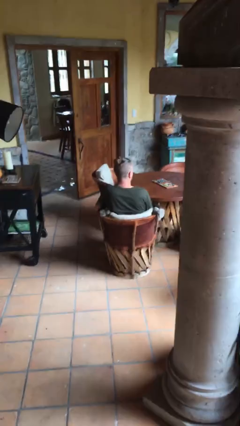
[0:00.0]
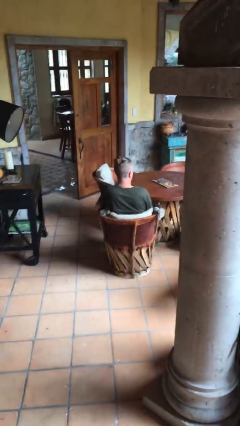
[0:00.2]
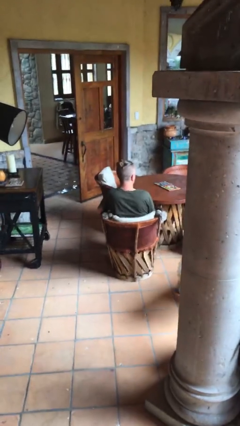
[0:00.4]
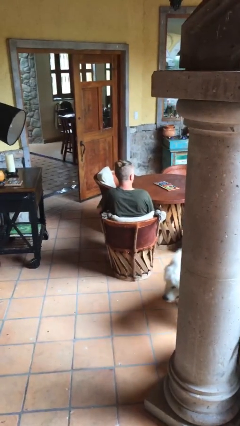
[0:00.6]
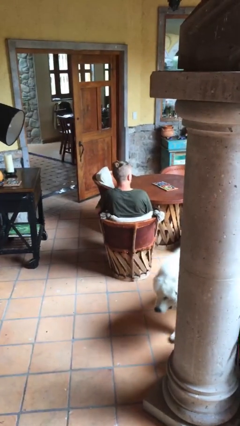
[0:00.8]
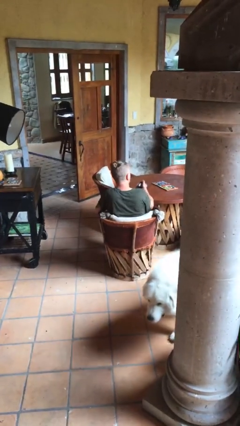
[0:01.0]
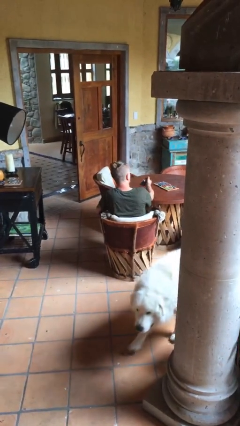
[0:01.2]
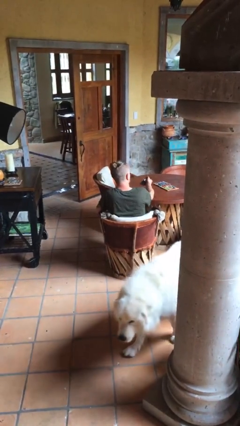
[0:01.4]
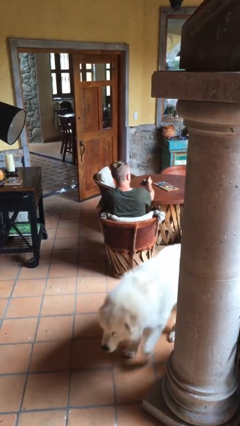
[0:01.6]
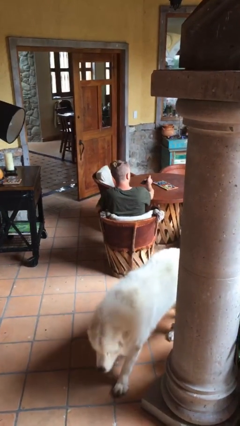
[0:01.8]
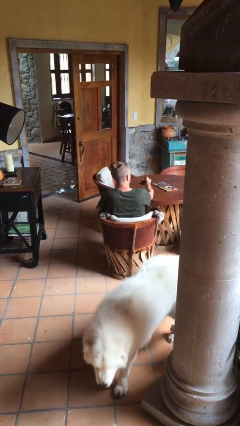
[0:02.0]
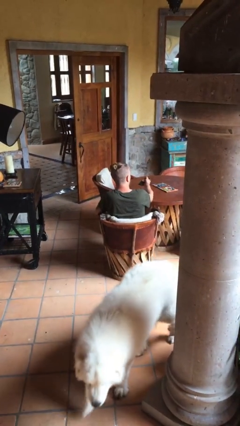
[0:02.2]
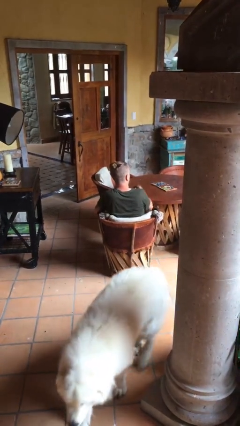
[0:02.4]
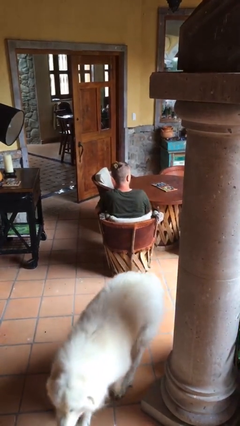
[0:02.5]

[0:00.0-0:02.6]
person uses television remote

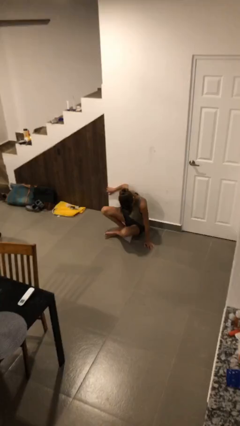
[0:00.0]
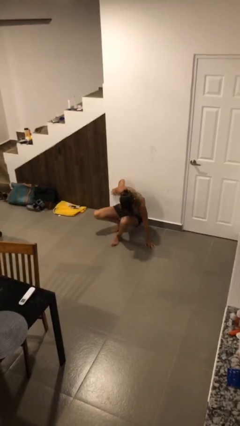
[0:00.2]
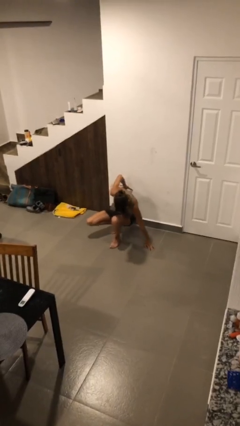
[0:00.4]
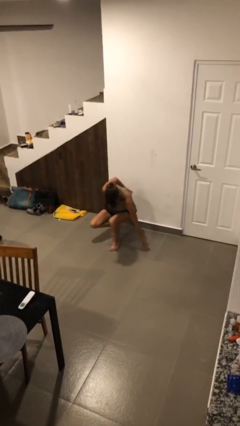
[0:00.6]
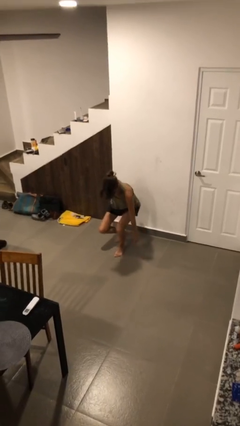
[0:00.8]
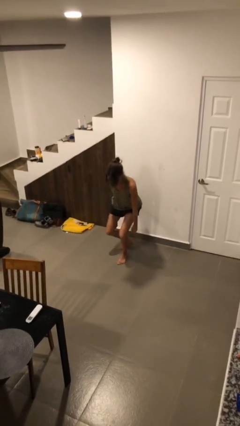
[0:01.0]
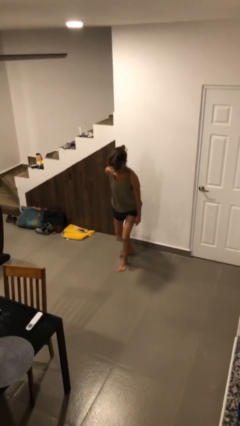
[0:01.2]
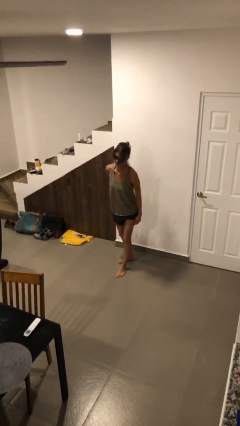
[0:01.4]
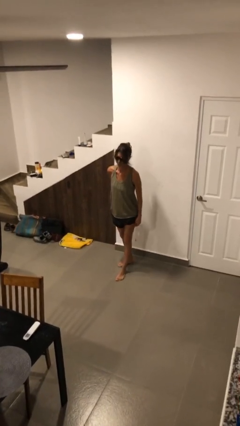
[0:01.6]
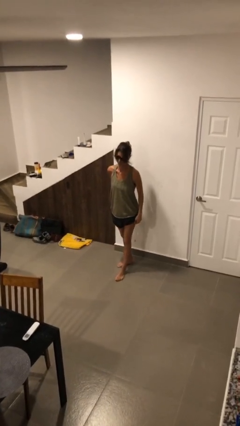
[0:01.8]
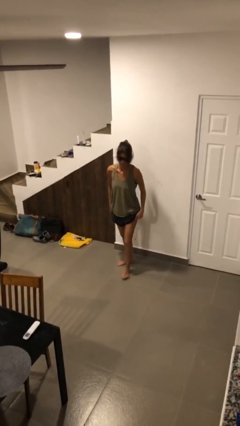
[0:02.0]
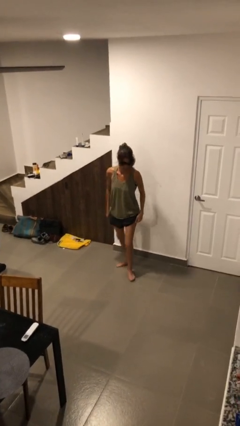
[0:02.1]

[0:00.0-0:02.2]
person stands up

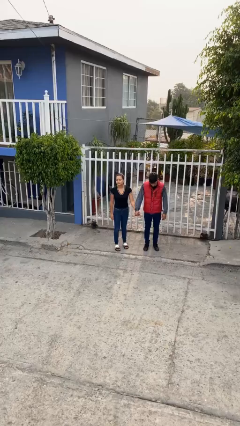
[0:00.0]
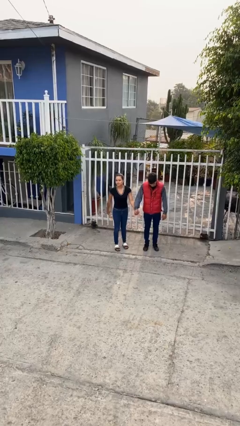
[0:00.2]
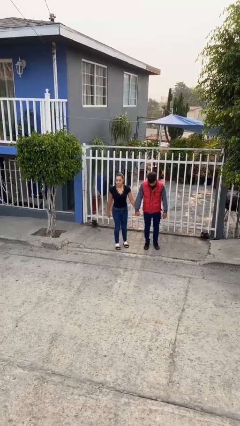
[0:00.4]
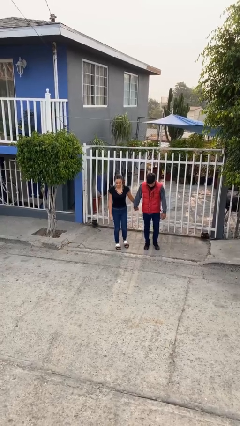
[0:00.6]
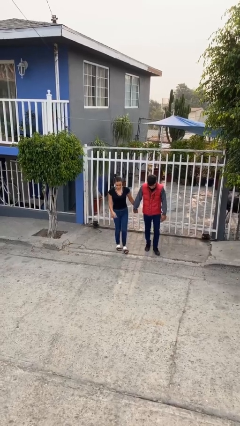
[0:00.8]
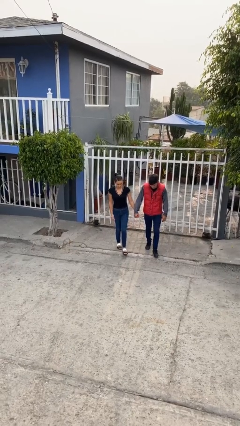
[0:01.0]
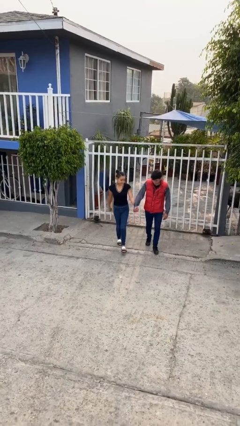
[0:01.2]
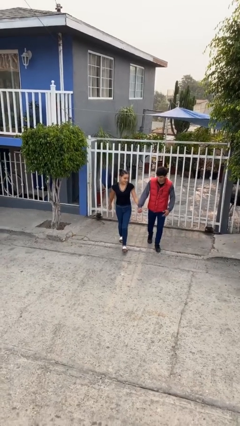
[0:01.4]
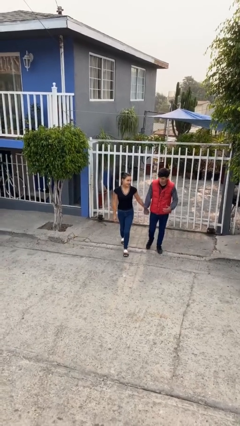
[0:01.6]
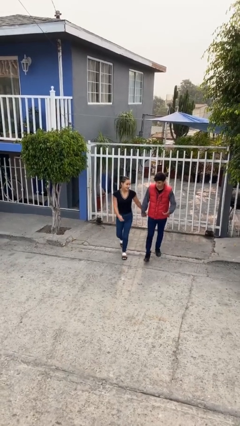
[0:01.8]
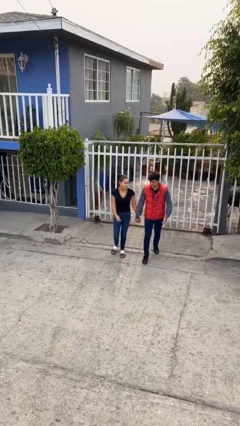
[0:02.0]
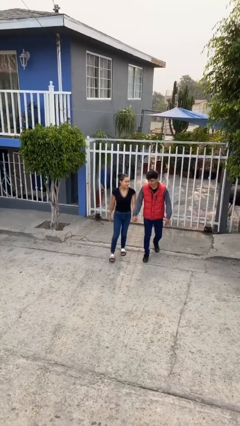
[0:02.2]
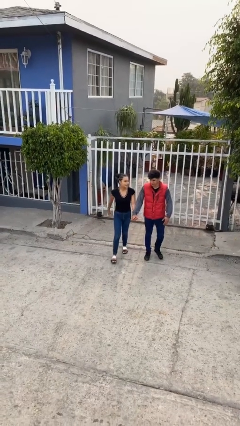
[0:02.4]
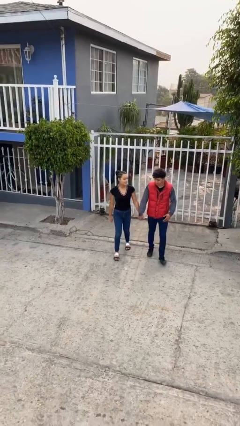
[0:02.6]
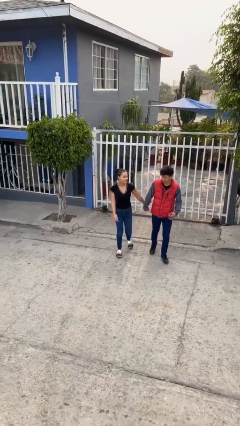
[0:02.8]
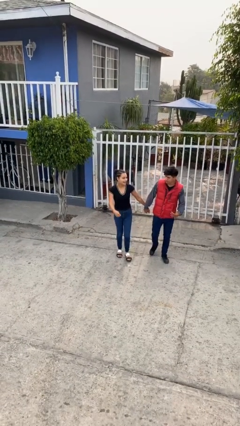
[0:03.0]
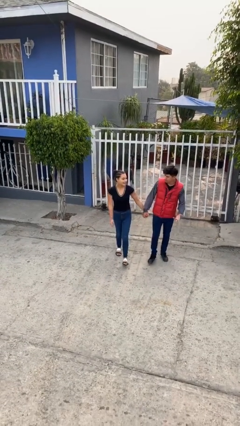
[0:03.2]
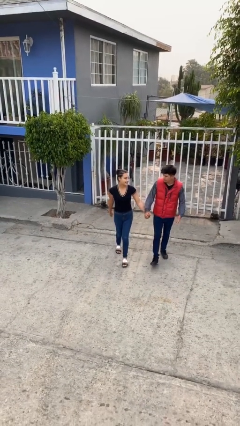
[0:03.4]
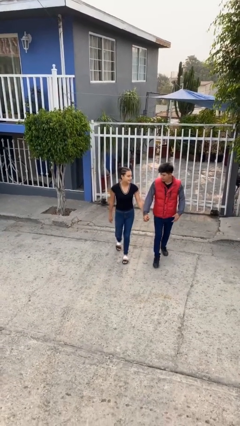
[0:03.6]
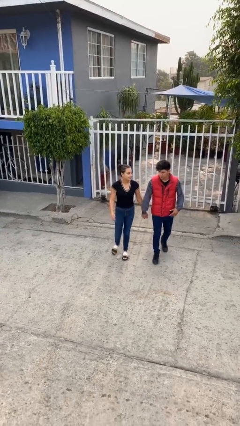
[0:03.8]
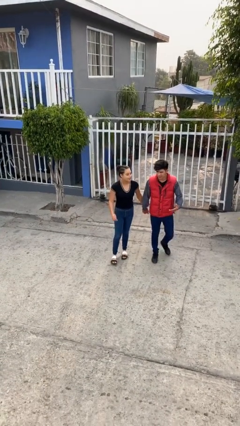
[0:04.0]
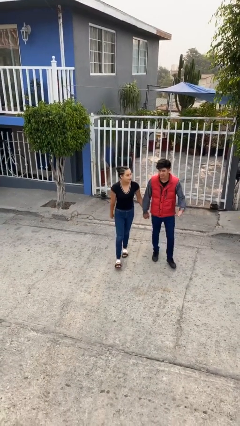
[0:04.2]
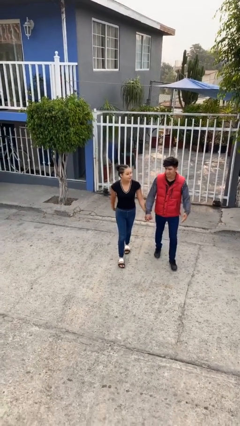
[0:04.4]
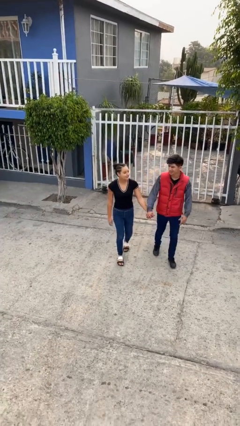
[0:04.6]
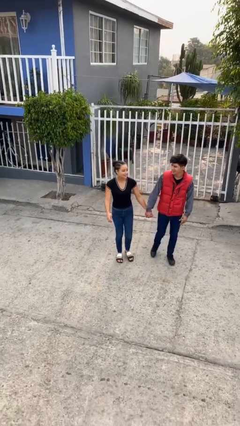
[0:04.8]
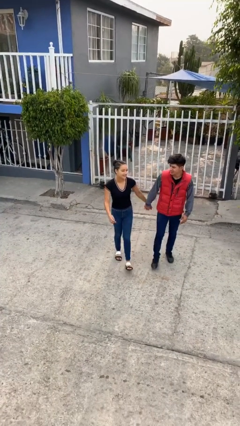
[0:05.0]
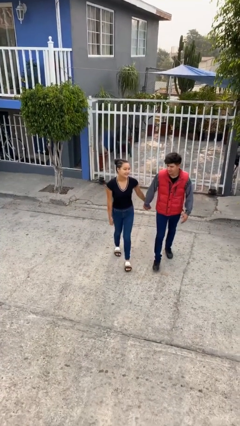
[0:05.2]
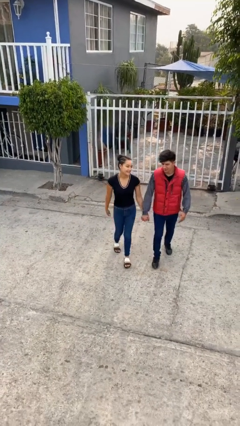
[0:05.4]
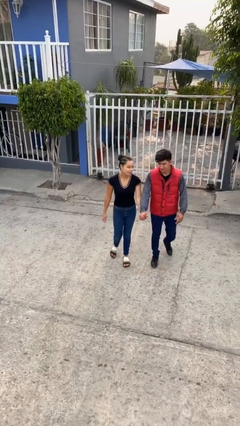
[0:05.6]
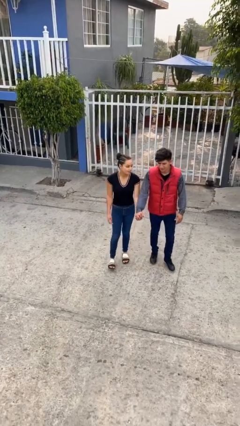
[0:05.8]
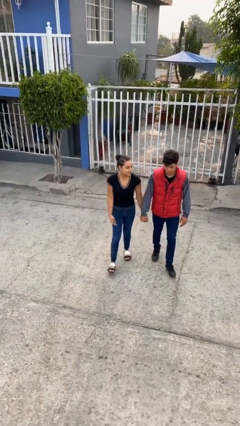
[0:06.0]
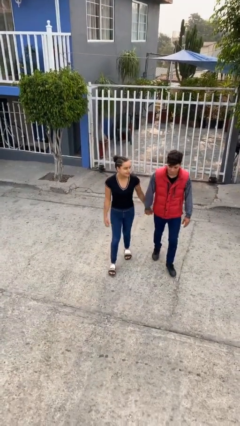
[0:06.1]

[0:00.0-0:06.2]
person holds hand

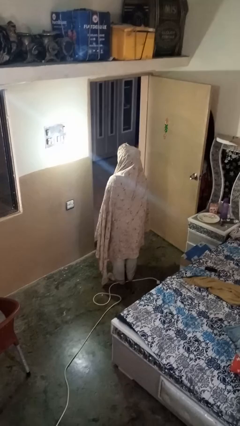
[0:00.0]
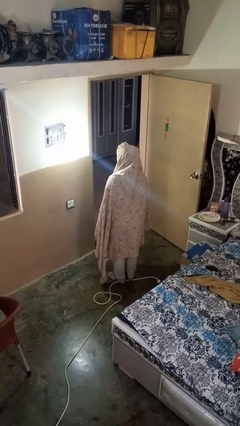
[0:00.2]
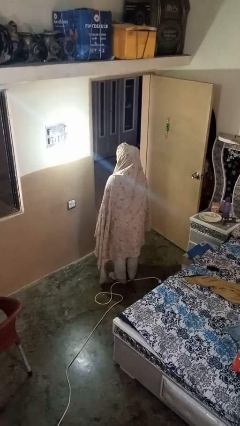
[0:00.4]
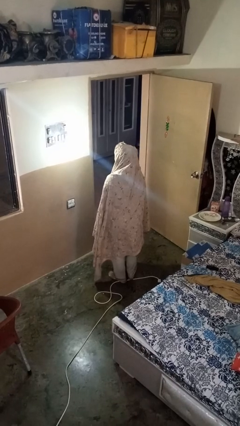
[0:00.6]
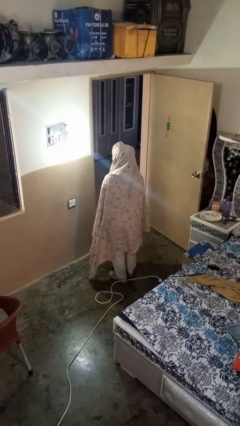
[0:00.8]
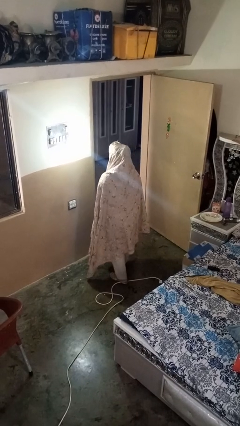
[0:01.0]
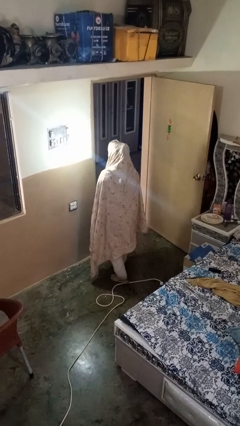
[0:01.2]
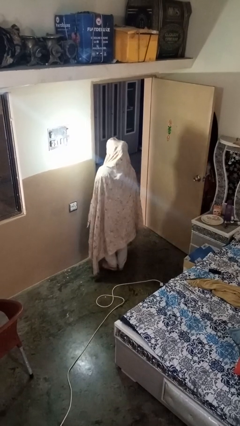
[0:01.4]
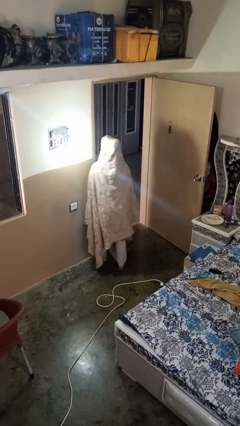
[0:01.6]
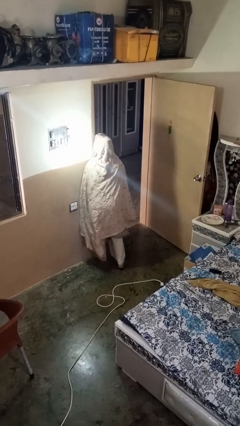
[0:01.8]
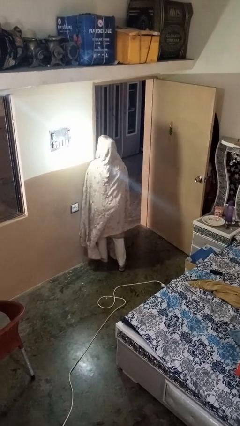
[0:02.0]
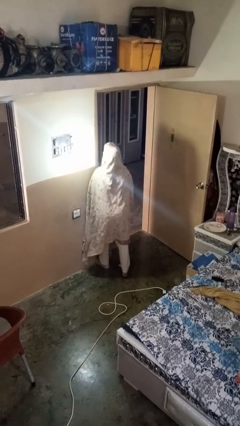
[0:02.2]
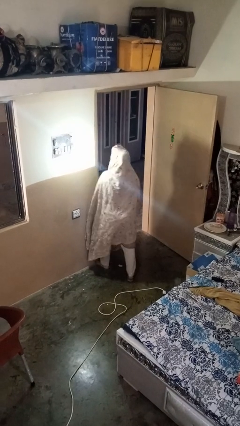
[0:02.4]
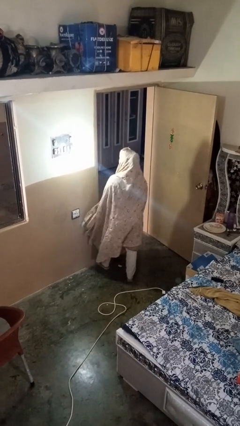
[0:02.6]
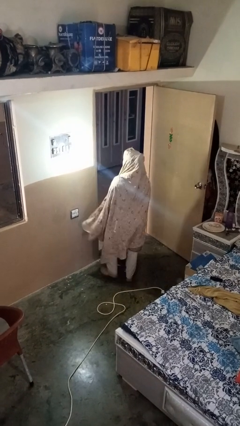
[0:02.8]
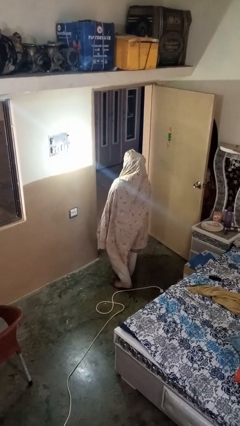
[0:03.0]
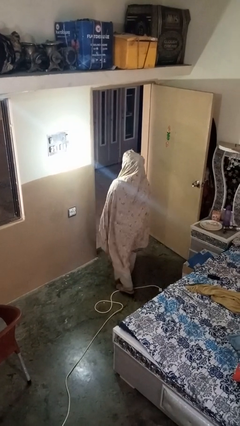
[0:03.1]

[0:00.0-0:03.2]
person bumps into wall

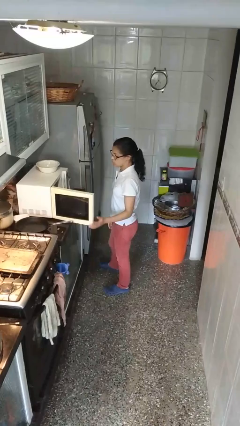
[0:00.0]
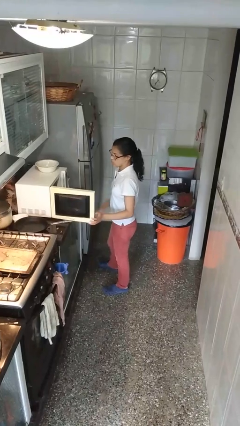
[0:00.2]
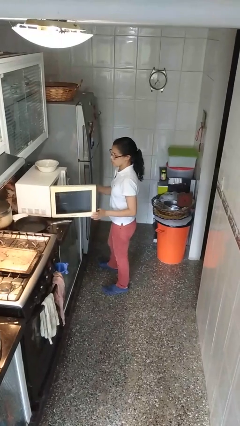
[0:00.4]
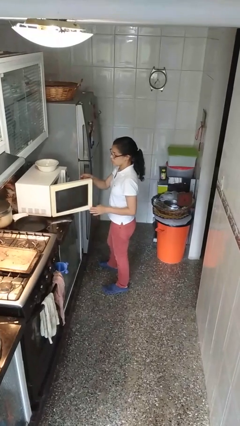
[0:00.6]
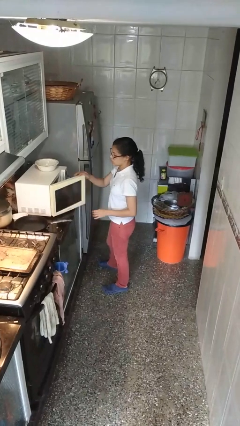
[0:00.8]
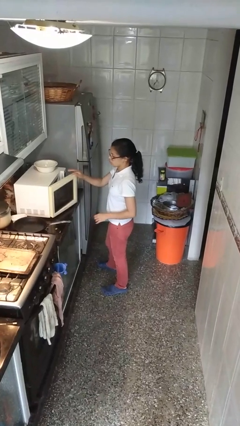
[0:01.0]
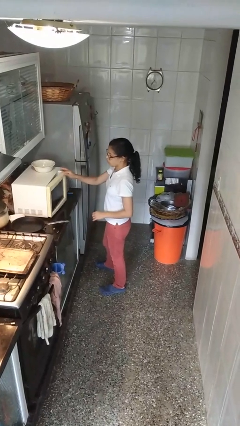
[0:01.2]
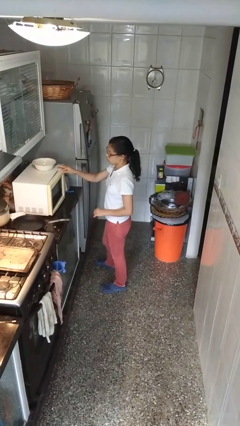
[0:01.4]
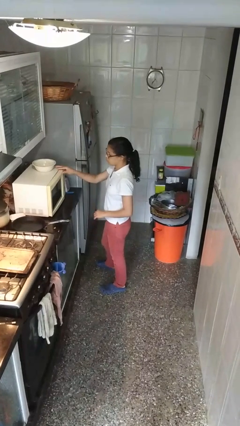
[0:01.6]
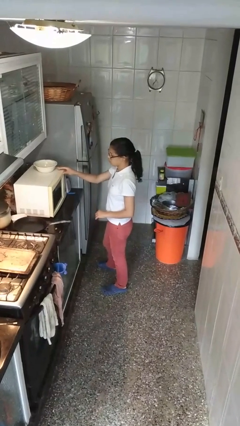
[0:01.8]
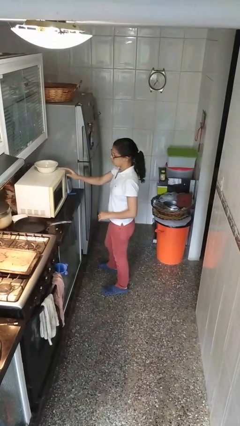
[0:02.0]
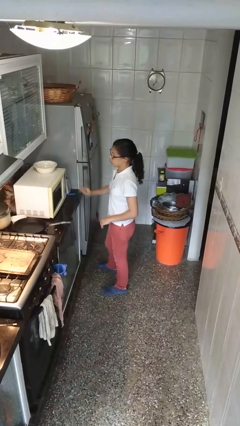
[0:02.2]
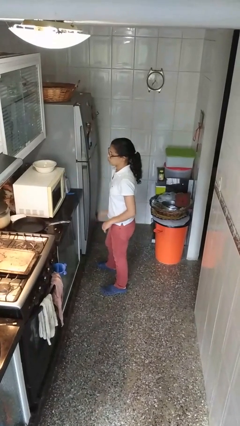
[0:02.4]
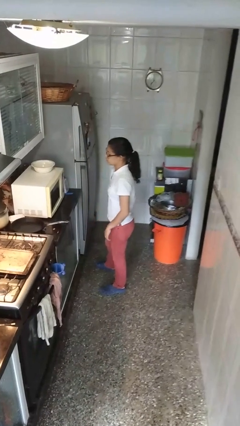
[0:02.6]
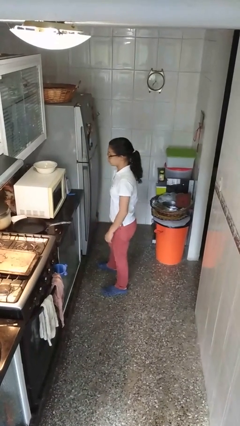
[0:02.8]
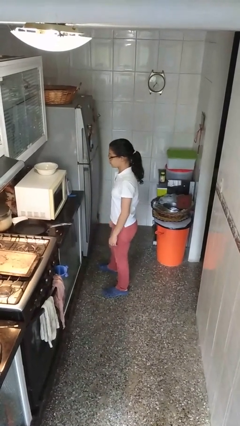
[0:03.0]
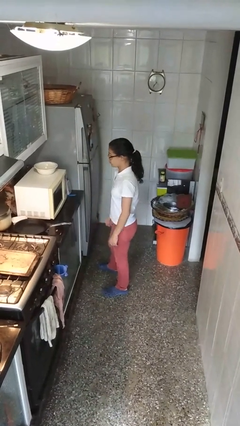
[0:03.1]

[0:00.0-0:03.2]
person closes microwave

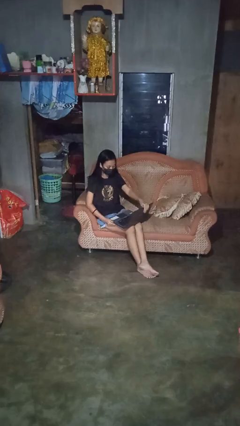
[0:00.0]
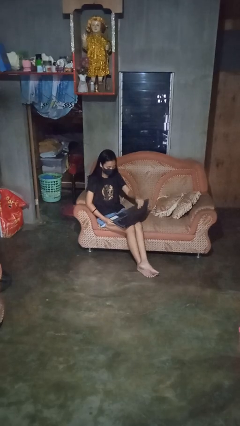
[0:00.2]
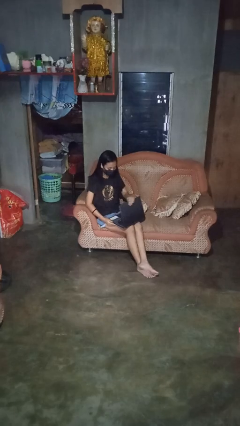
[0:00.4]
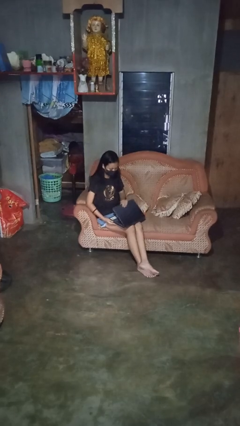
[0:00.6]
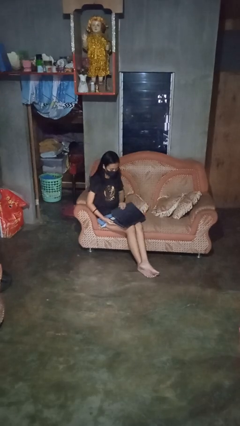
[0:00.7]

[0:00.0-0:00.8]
person closes laptop
